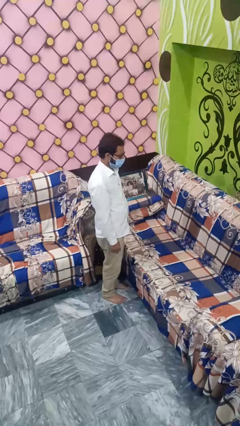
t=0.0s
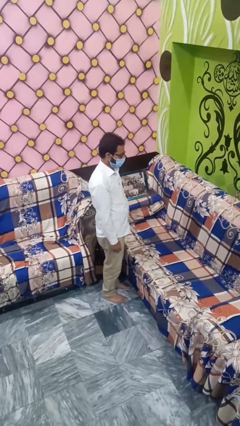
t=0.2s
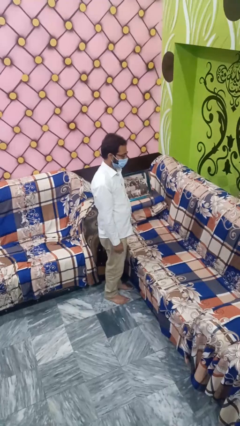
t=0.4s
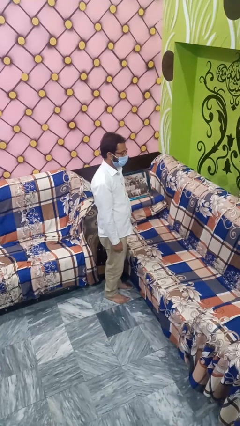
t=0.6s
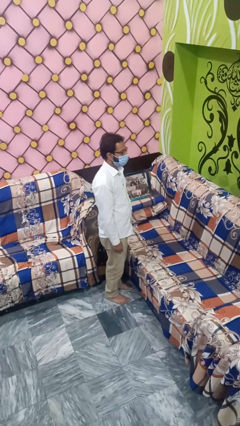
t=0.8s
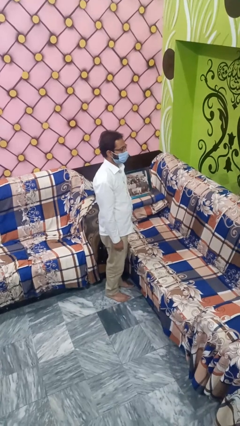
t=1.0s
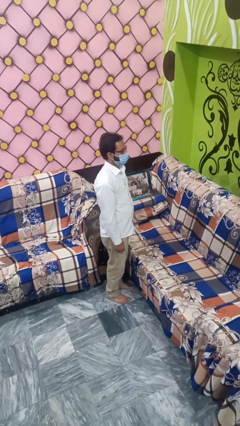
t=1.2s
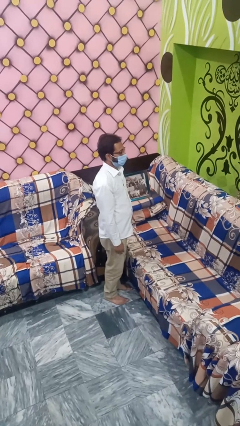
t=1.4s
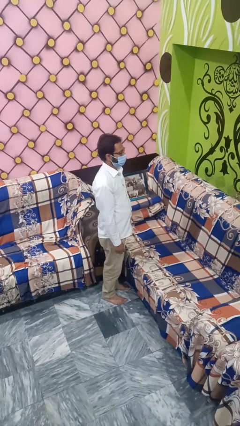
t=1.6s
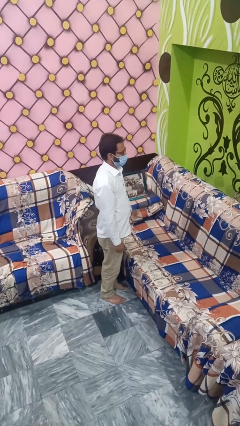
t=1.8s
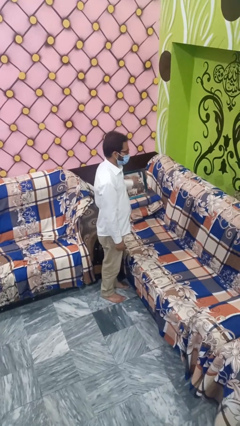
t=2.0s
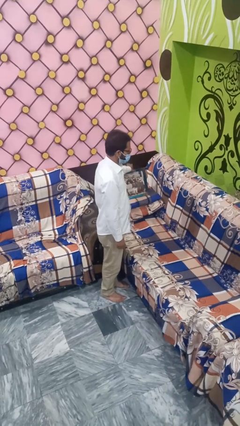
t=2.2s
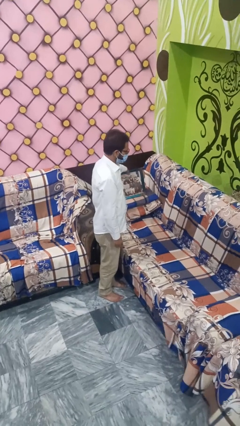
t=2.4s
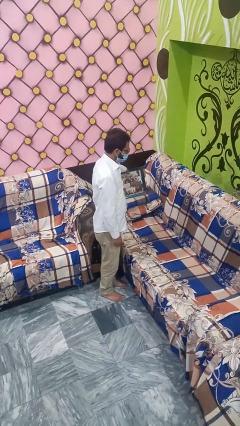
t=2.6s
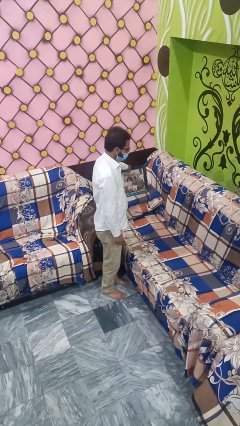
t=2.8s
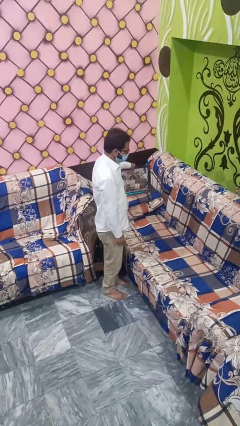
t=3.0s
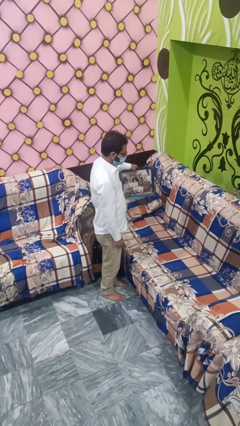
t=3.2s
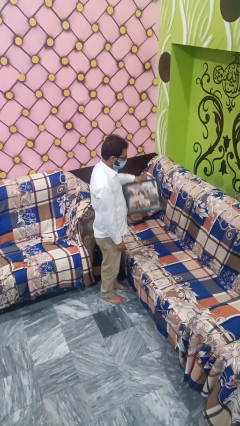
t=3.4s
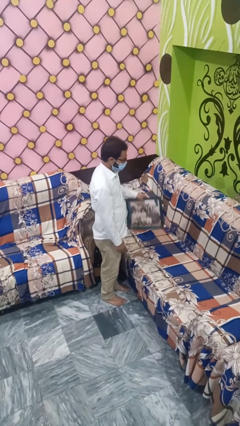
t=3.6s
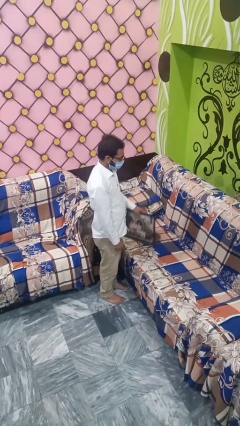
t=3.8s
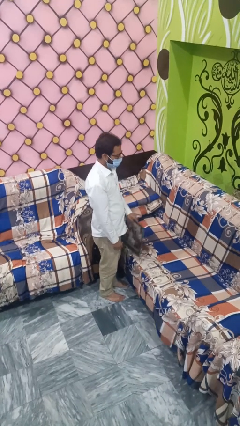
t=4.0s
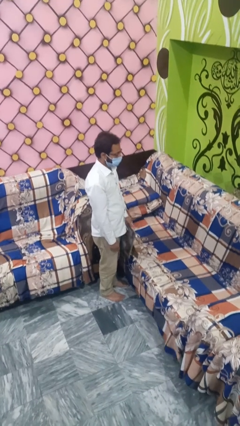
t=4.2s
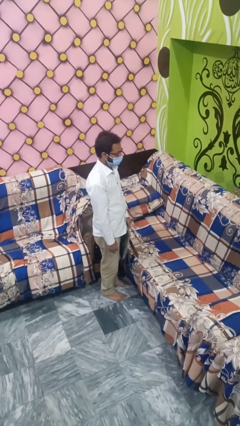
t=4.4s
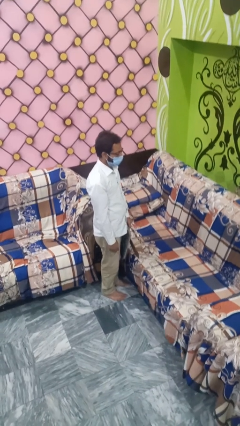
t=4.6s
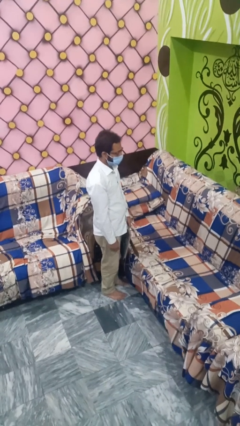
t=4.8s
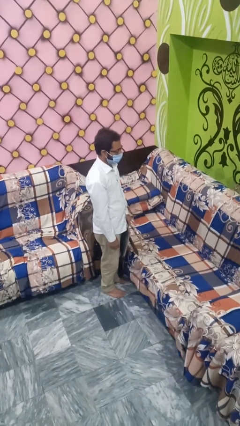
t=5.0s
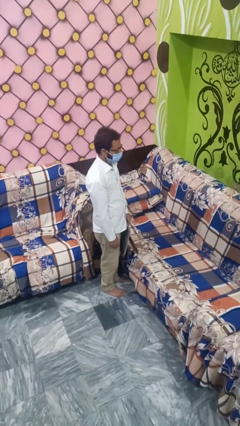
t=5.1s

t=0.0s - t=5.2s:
person puts up picture frame

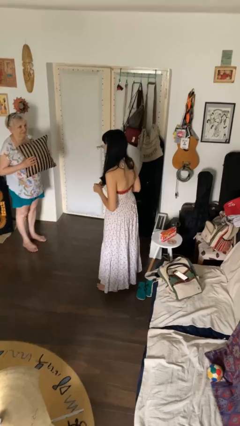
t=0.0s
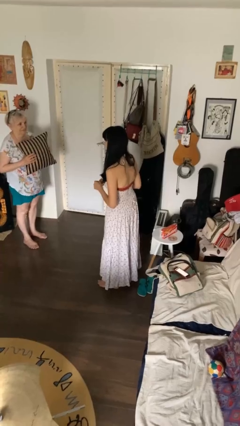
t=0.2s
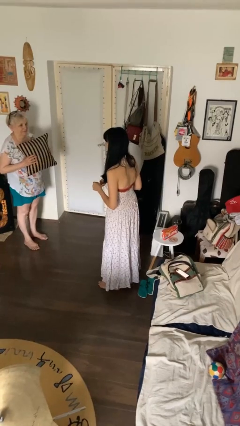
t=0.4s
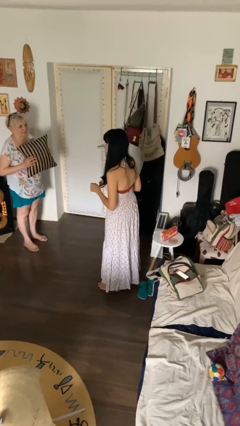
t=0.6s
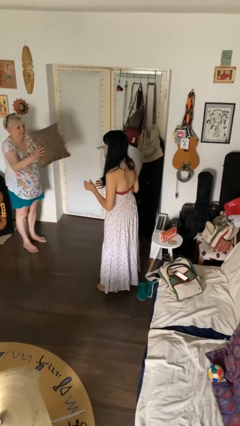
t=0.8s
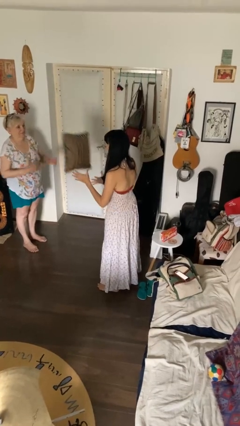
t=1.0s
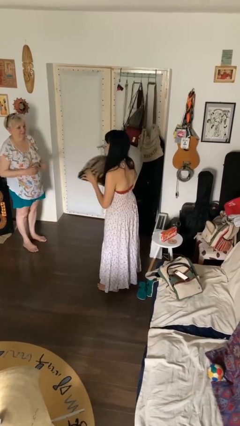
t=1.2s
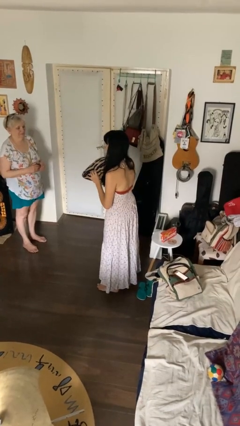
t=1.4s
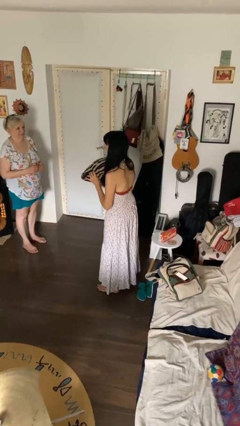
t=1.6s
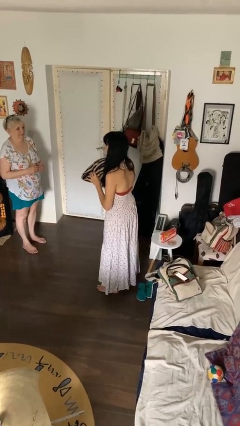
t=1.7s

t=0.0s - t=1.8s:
person catches object from person

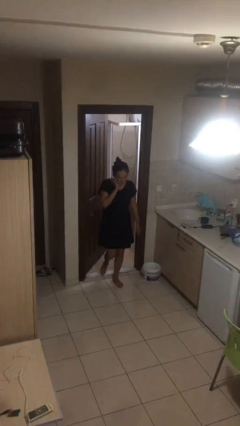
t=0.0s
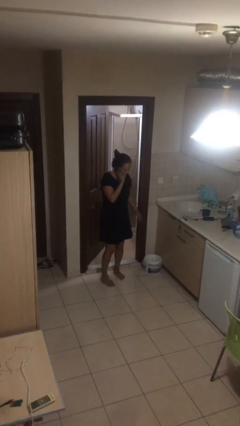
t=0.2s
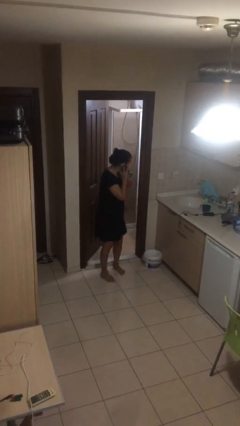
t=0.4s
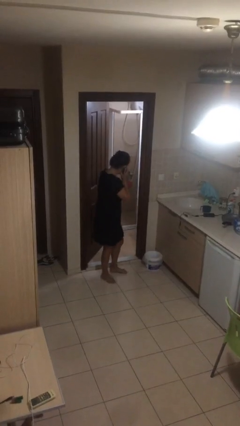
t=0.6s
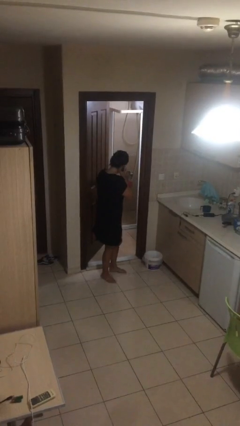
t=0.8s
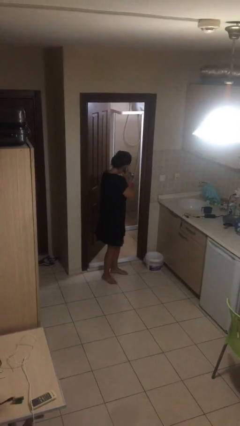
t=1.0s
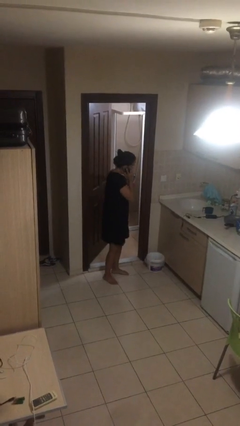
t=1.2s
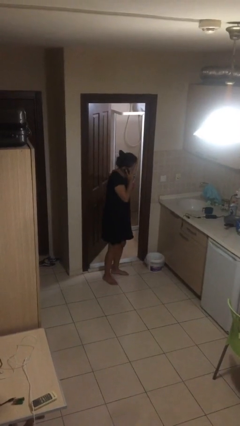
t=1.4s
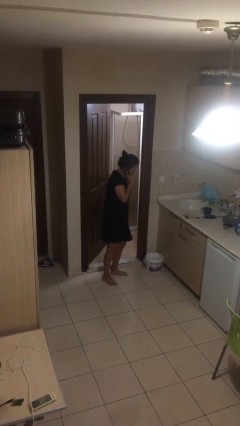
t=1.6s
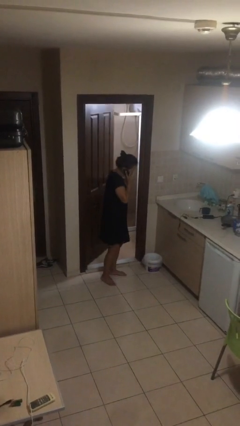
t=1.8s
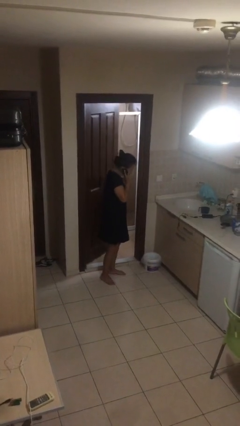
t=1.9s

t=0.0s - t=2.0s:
person enters scene through structure

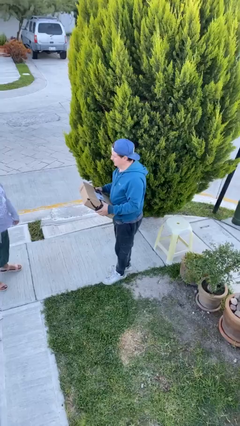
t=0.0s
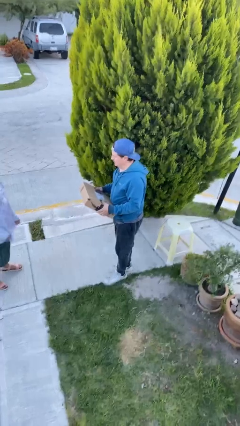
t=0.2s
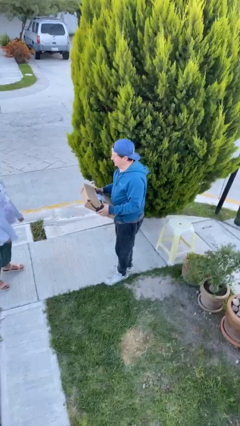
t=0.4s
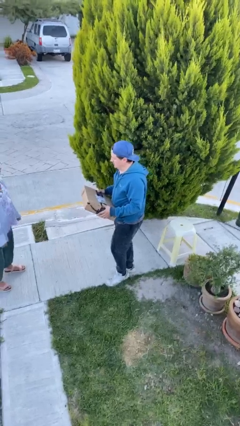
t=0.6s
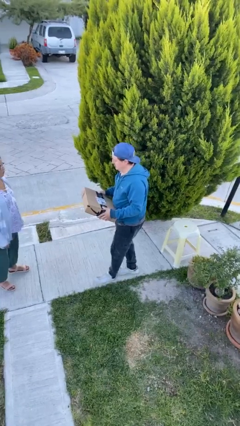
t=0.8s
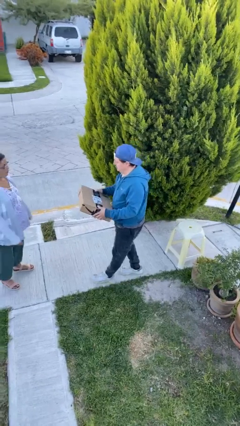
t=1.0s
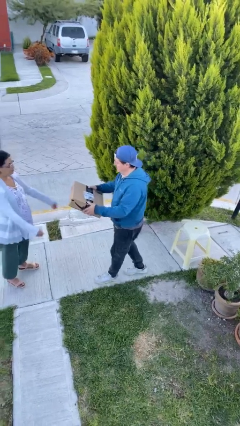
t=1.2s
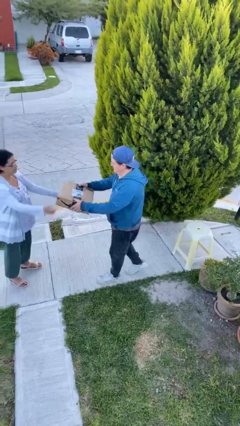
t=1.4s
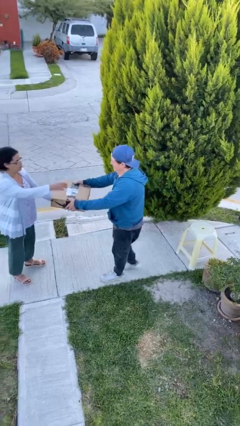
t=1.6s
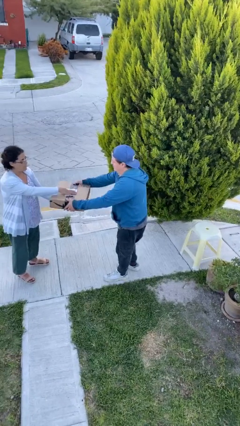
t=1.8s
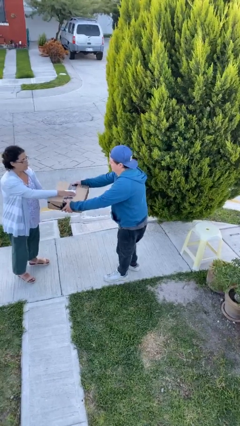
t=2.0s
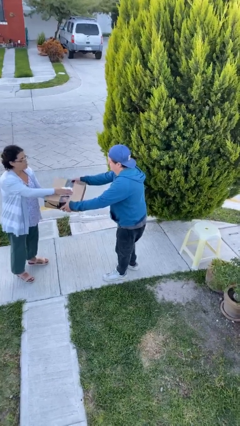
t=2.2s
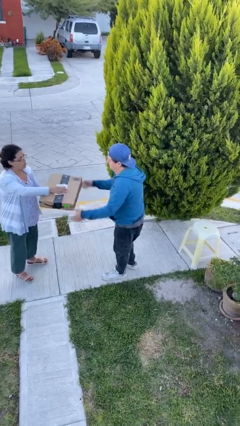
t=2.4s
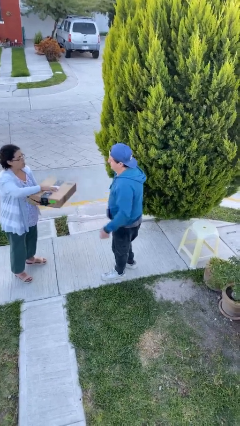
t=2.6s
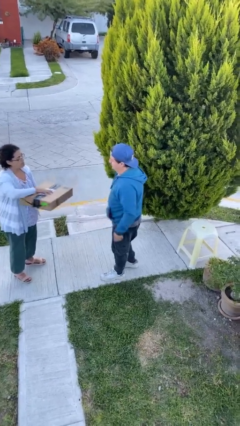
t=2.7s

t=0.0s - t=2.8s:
person transfers object to person

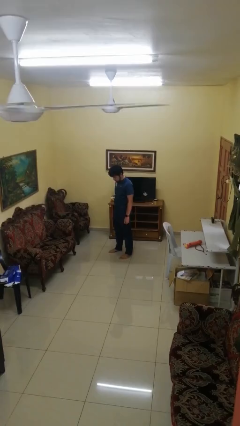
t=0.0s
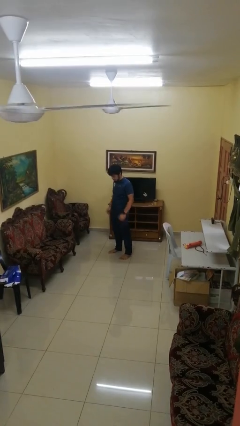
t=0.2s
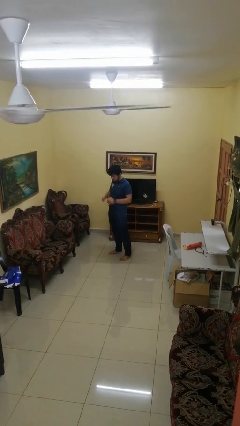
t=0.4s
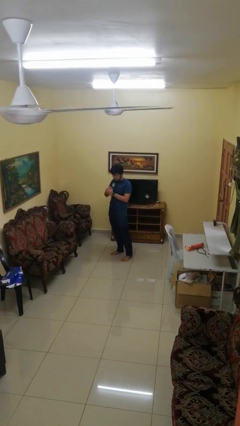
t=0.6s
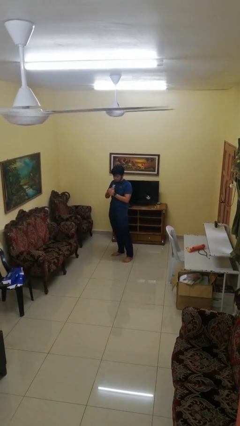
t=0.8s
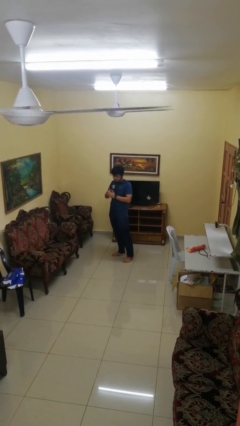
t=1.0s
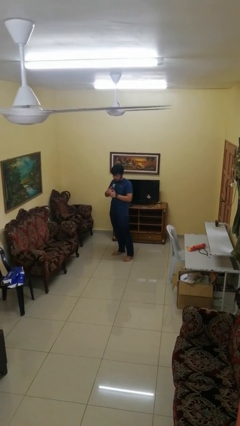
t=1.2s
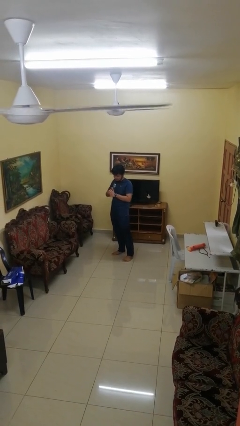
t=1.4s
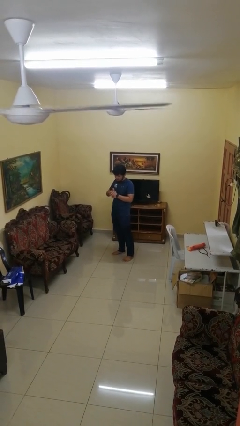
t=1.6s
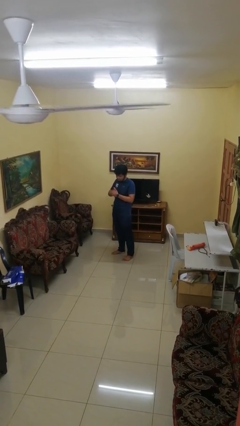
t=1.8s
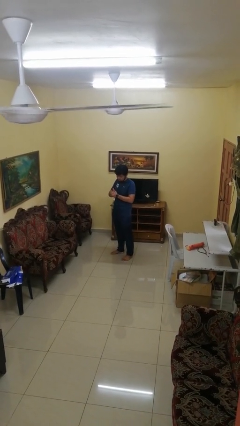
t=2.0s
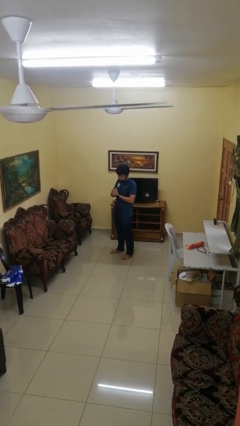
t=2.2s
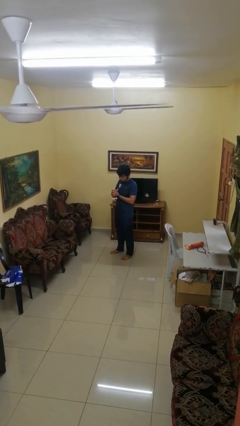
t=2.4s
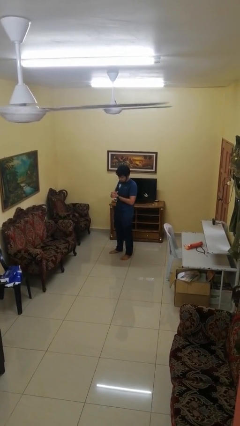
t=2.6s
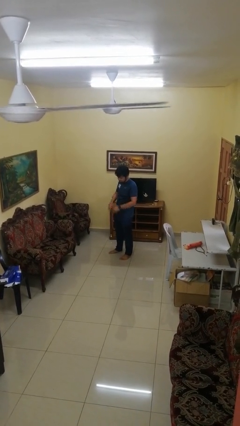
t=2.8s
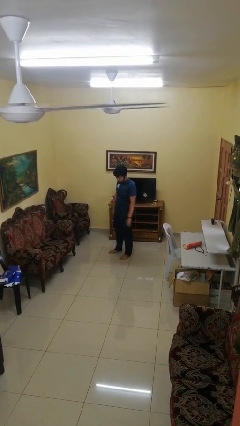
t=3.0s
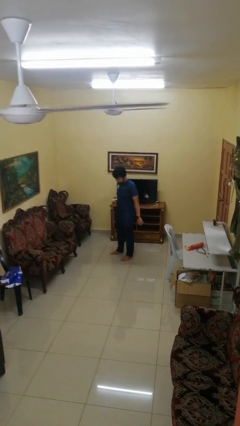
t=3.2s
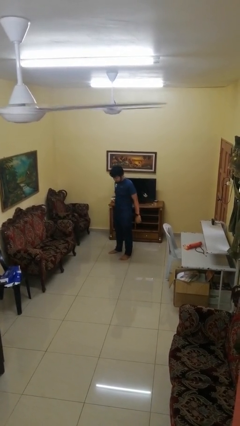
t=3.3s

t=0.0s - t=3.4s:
person cracks knuckles

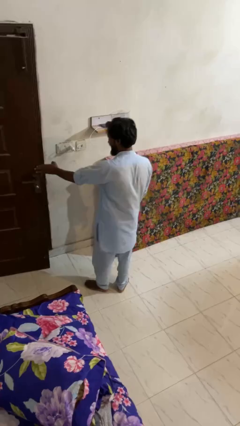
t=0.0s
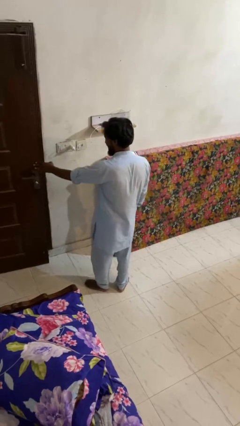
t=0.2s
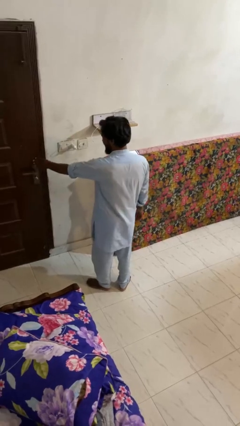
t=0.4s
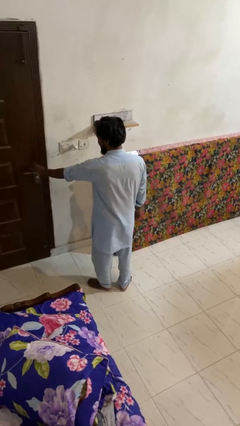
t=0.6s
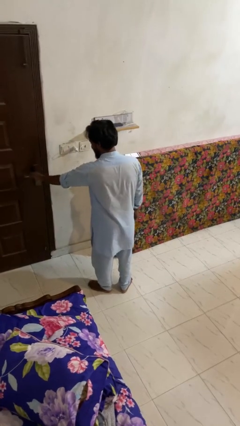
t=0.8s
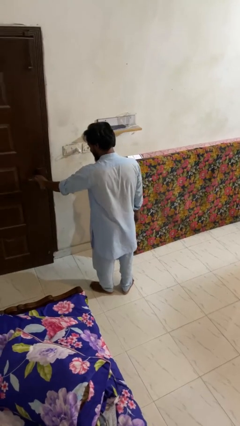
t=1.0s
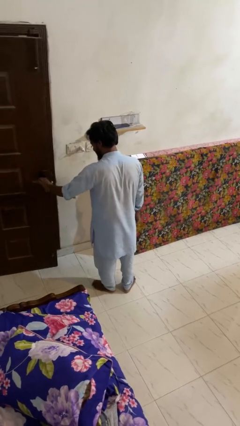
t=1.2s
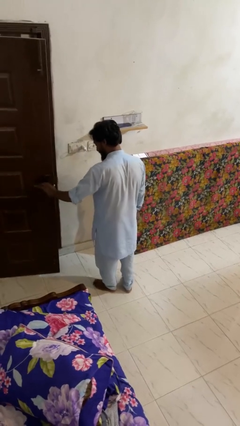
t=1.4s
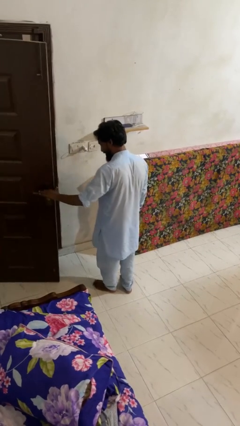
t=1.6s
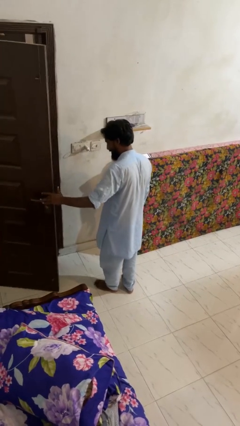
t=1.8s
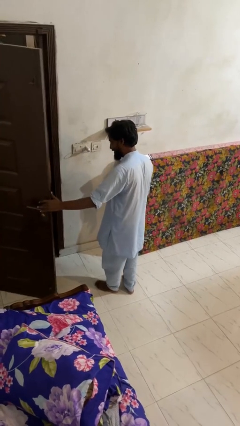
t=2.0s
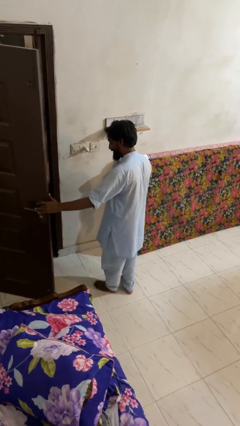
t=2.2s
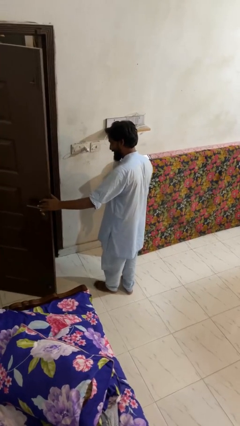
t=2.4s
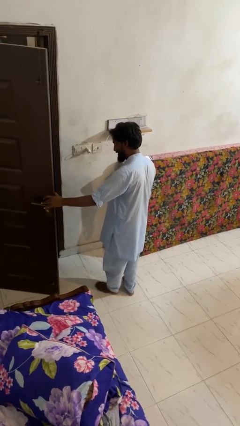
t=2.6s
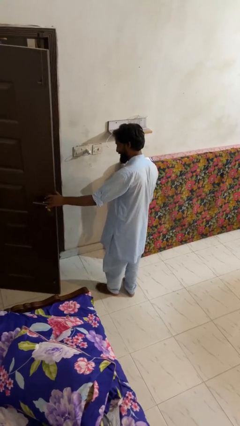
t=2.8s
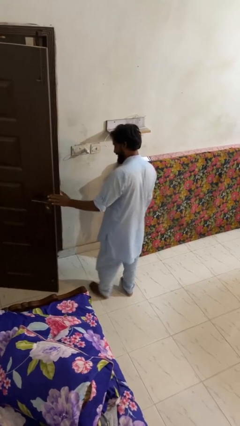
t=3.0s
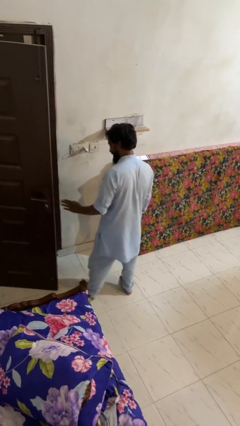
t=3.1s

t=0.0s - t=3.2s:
person opens facility door
